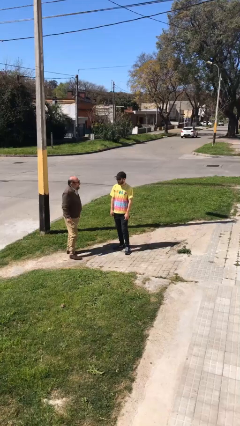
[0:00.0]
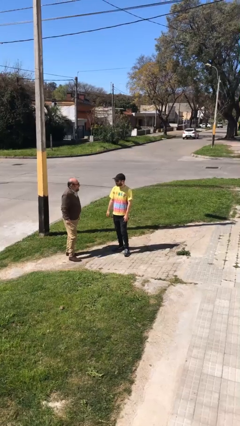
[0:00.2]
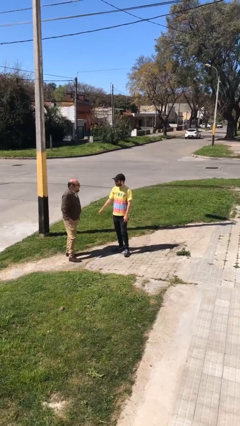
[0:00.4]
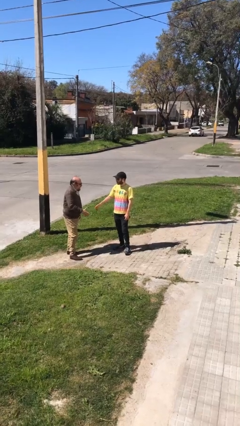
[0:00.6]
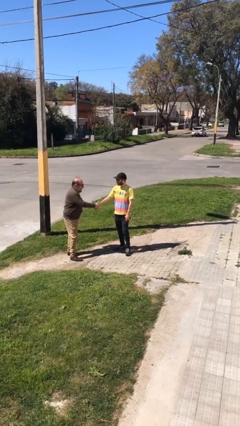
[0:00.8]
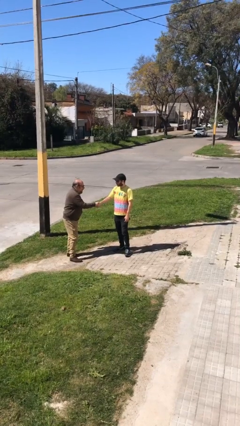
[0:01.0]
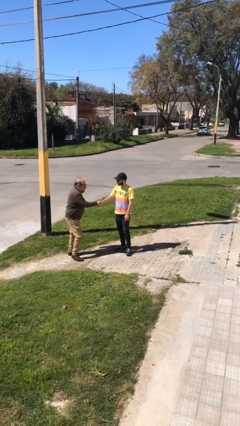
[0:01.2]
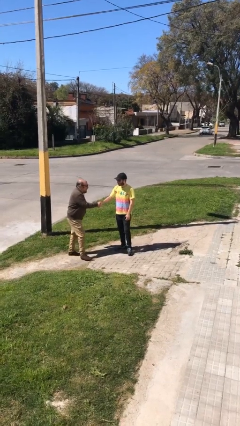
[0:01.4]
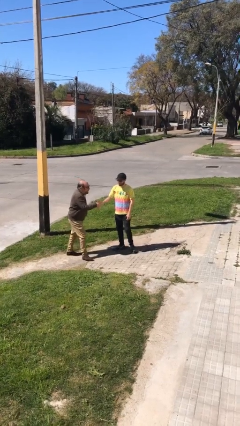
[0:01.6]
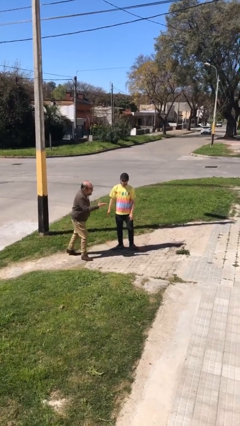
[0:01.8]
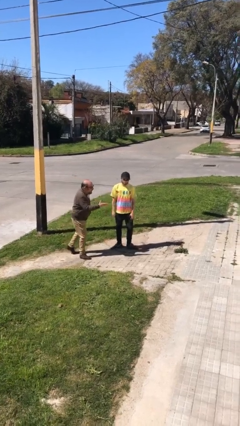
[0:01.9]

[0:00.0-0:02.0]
person shakes hand

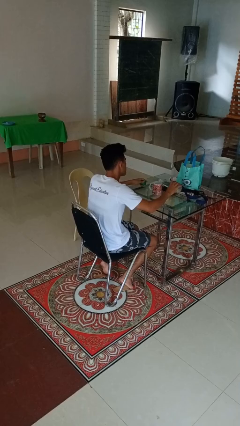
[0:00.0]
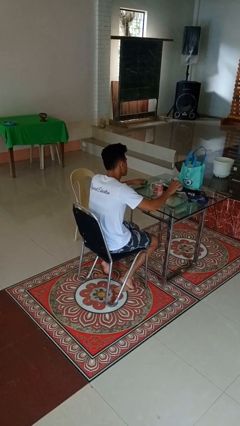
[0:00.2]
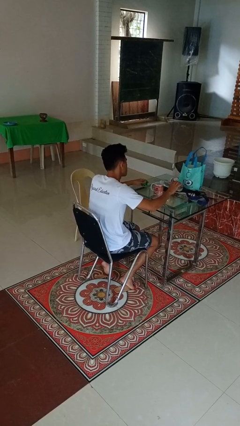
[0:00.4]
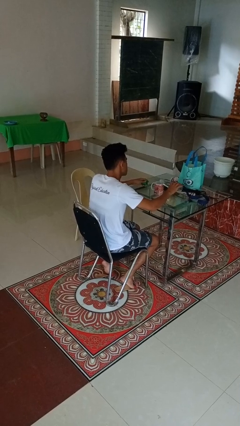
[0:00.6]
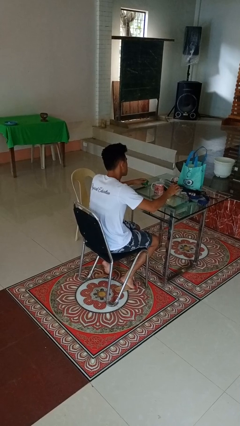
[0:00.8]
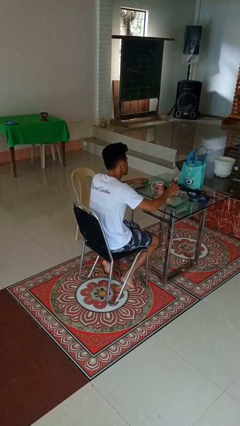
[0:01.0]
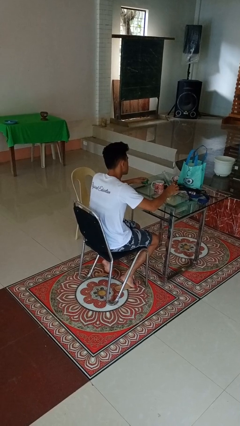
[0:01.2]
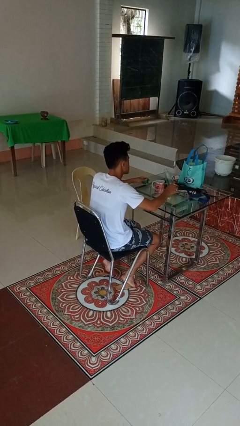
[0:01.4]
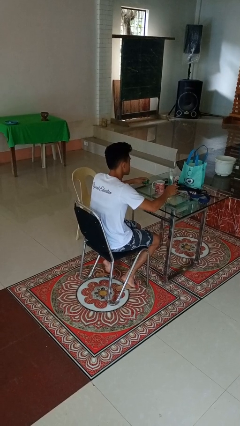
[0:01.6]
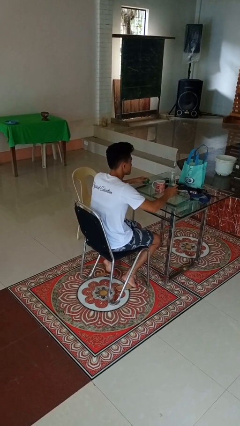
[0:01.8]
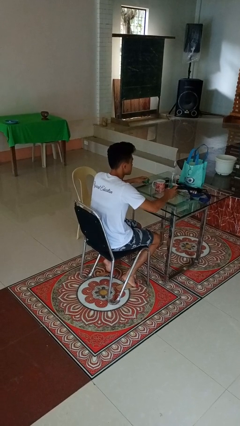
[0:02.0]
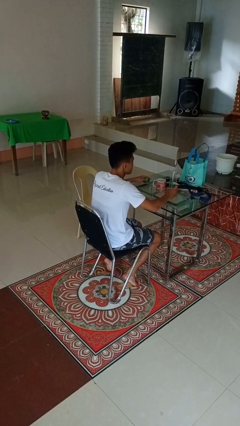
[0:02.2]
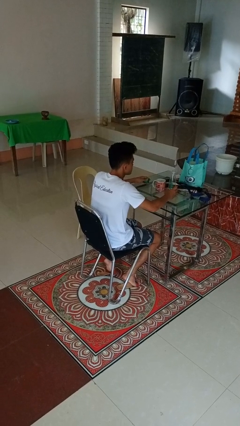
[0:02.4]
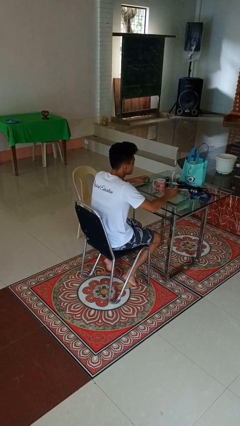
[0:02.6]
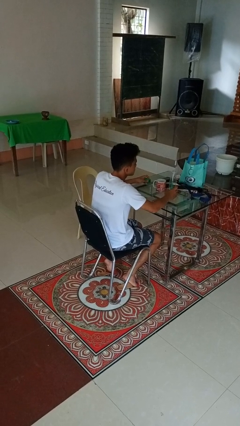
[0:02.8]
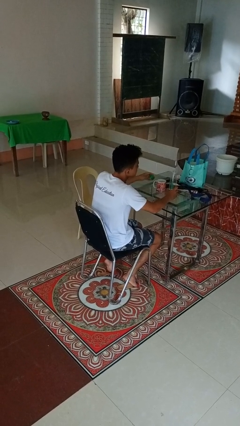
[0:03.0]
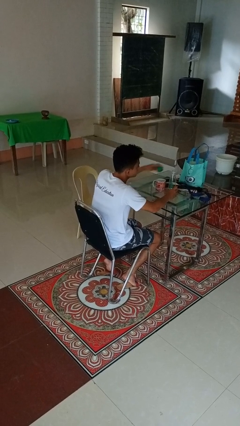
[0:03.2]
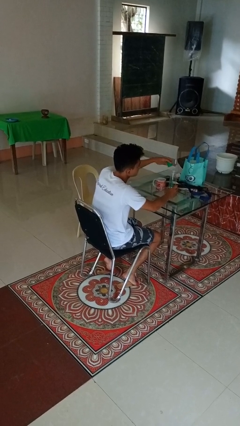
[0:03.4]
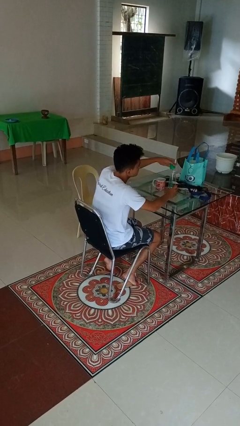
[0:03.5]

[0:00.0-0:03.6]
person pours liquid into cup

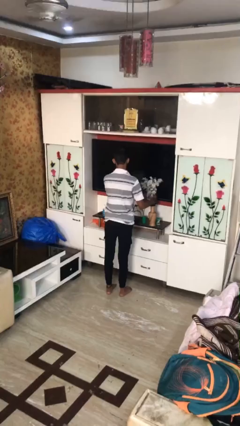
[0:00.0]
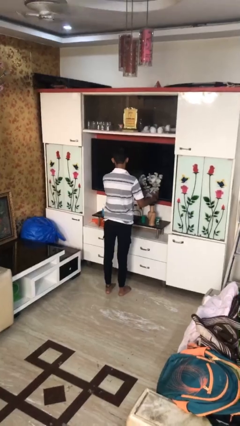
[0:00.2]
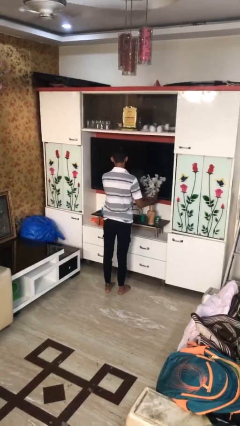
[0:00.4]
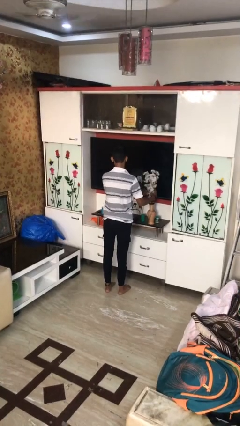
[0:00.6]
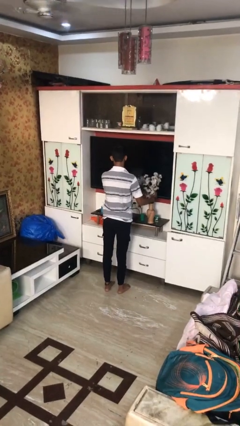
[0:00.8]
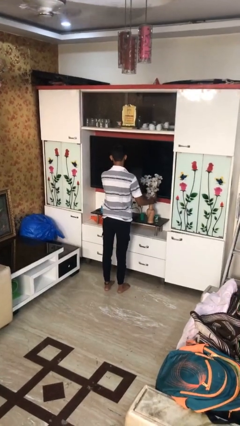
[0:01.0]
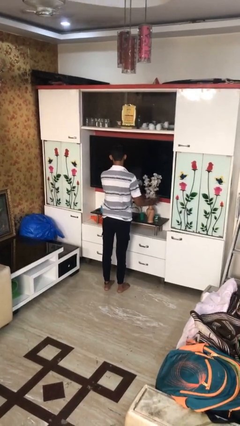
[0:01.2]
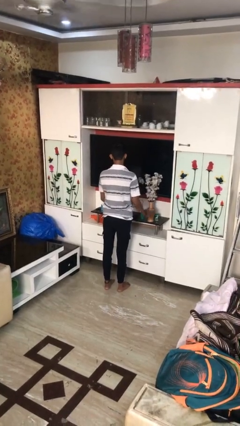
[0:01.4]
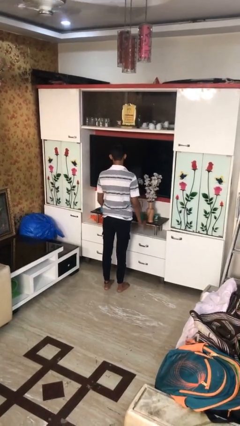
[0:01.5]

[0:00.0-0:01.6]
person arranges flowers in vase

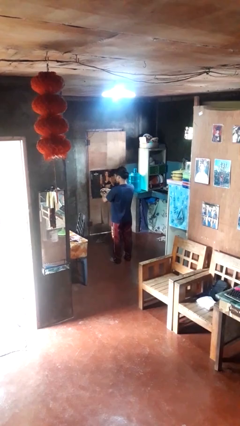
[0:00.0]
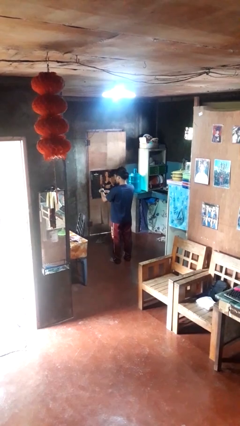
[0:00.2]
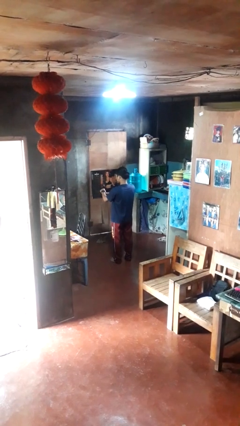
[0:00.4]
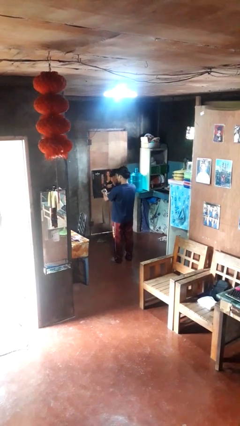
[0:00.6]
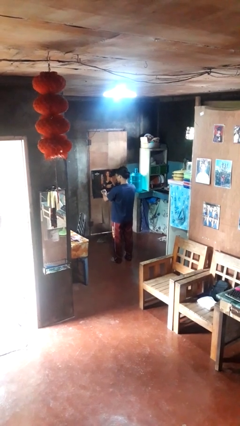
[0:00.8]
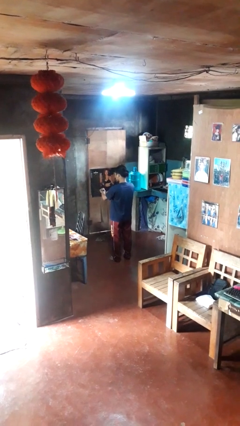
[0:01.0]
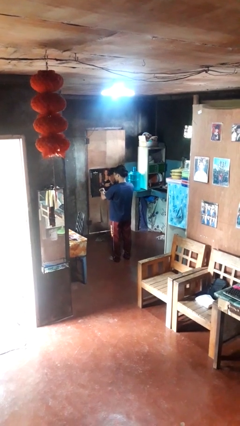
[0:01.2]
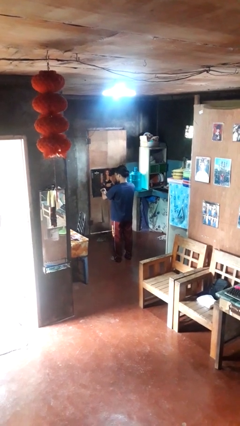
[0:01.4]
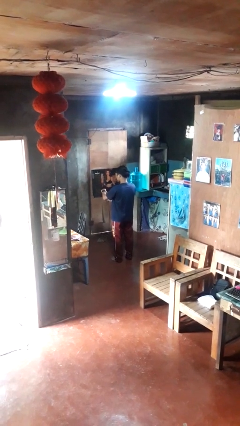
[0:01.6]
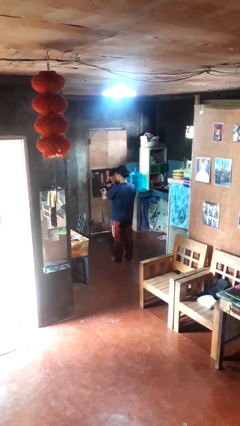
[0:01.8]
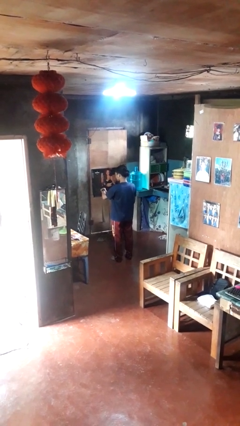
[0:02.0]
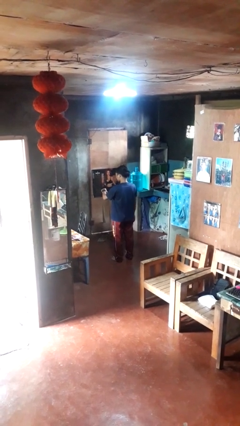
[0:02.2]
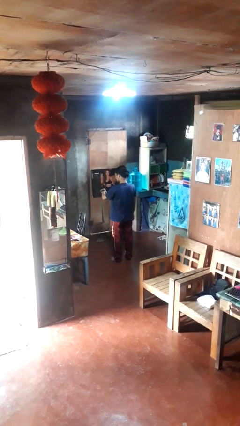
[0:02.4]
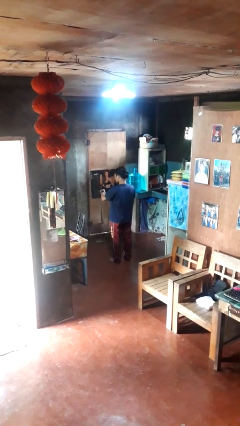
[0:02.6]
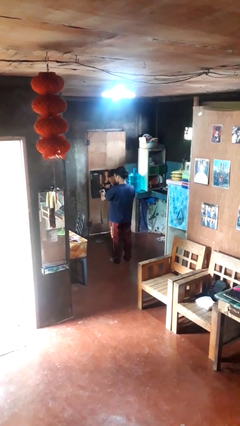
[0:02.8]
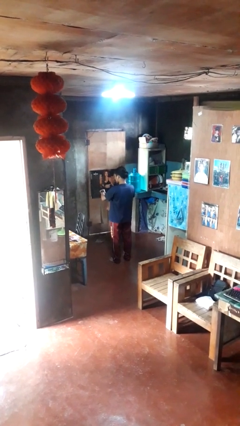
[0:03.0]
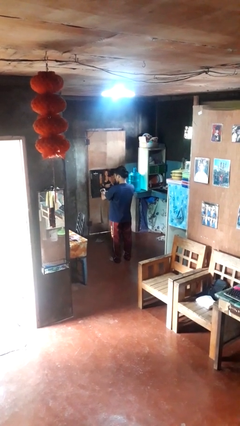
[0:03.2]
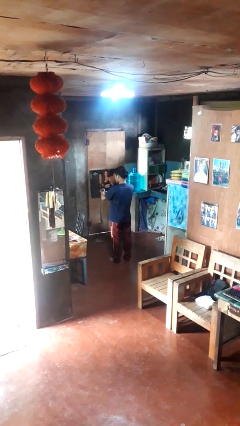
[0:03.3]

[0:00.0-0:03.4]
person puts on wristwatch

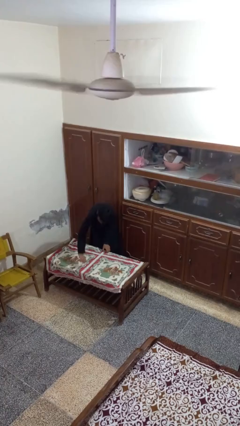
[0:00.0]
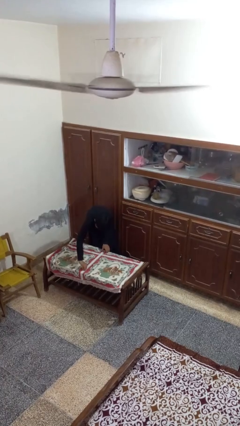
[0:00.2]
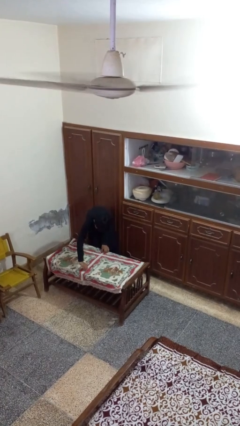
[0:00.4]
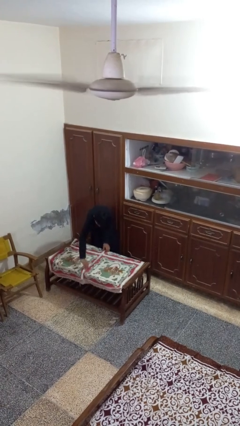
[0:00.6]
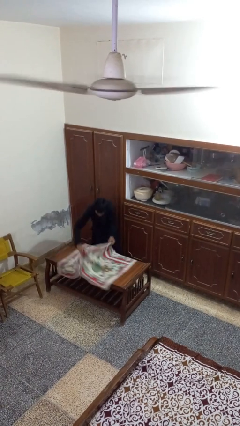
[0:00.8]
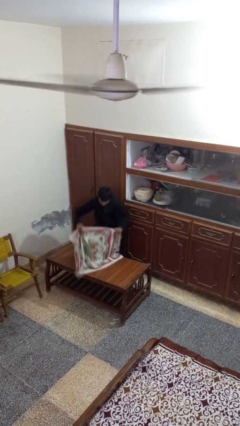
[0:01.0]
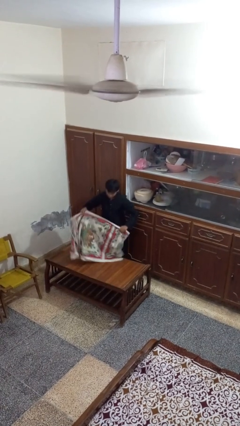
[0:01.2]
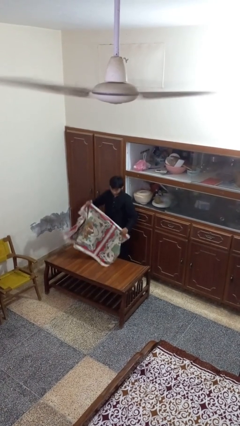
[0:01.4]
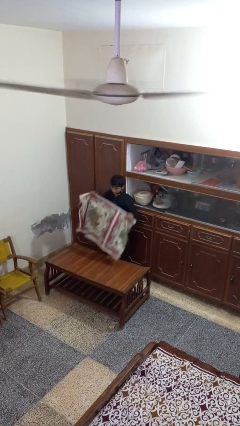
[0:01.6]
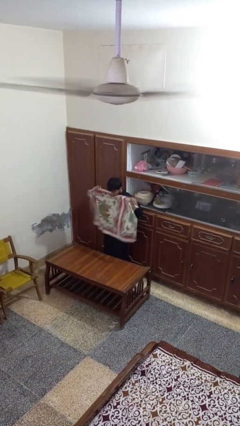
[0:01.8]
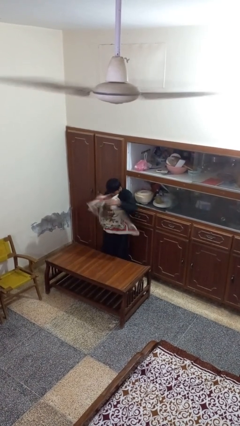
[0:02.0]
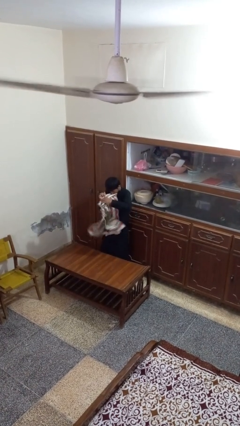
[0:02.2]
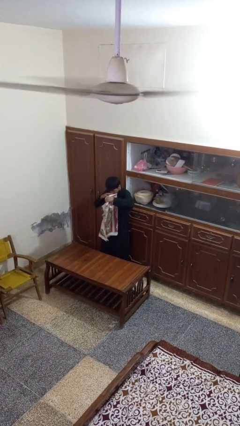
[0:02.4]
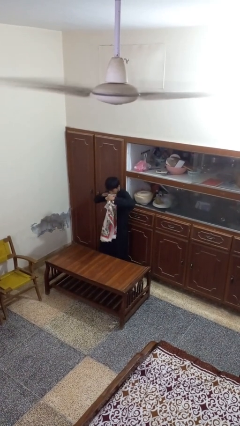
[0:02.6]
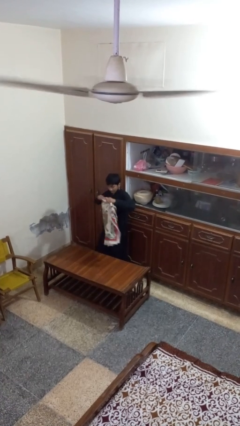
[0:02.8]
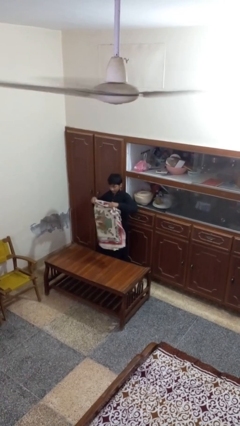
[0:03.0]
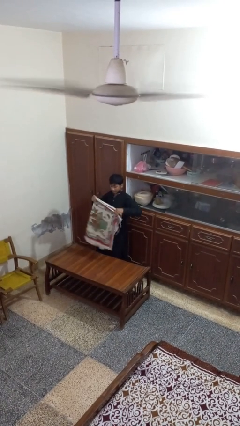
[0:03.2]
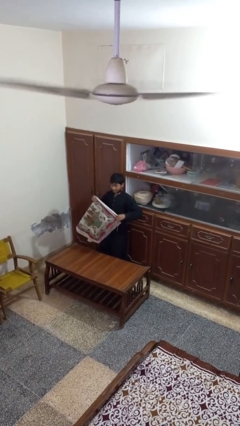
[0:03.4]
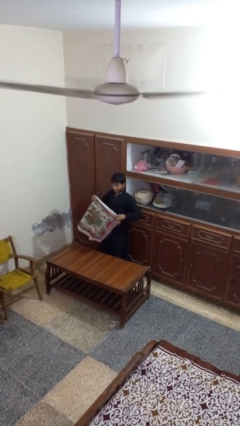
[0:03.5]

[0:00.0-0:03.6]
person folds tablecloth

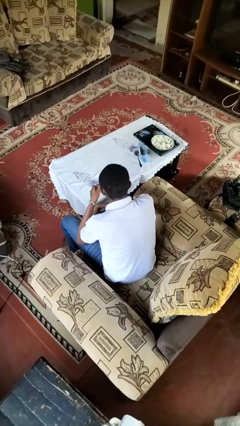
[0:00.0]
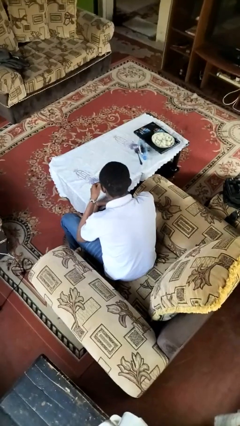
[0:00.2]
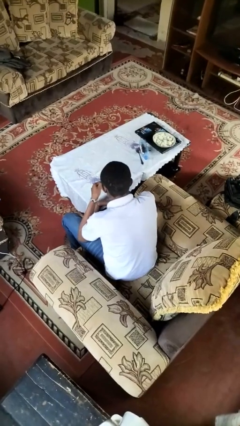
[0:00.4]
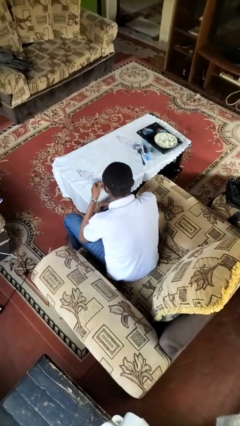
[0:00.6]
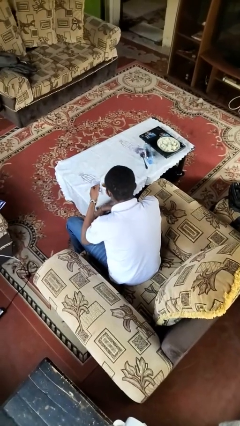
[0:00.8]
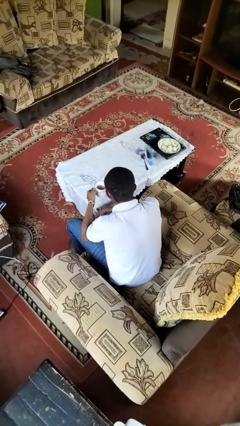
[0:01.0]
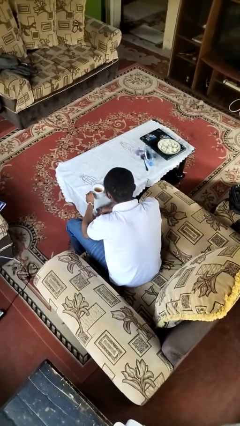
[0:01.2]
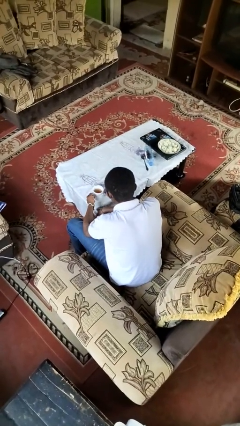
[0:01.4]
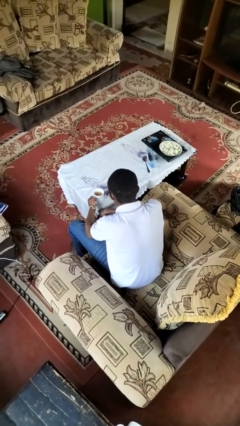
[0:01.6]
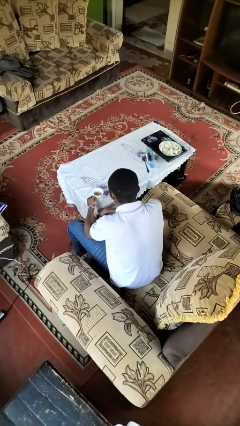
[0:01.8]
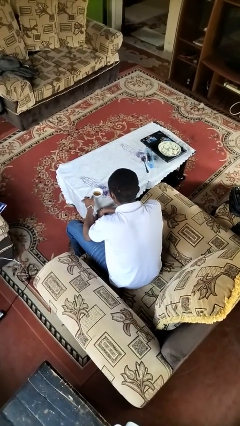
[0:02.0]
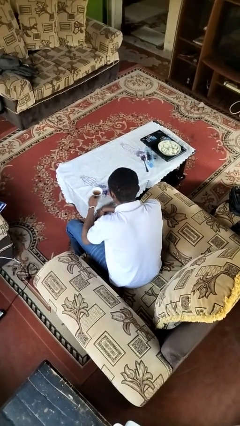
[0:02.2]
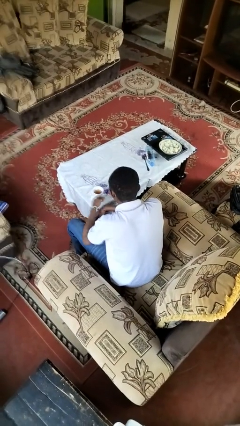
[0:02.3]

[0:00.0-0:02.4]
person puts down object on table

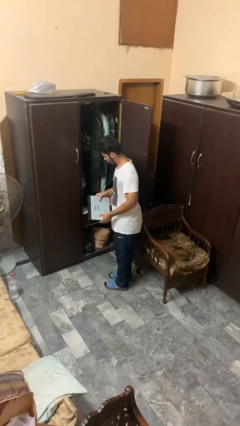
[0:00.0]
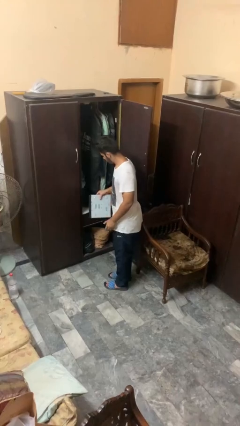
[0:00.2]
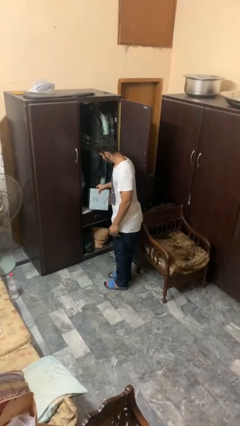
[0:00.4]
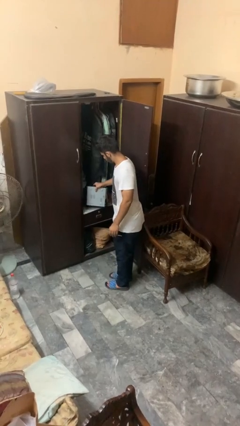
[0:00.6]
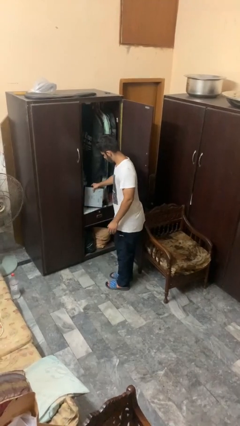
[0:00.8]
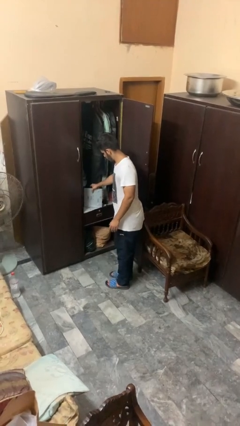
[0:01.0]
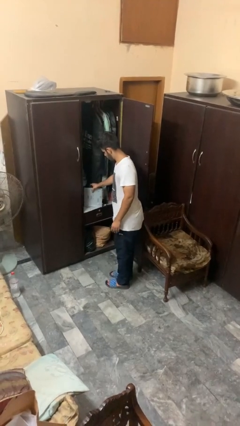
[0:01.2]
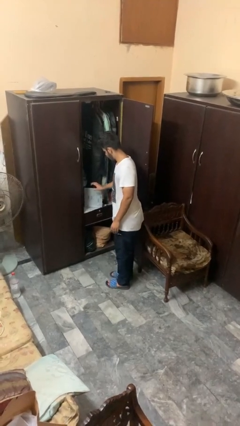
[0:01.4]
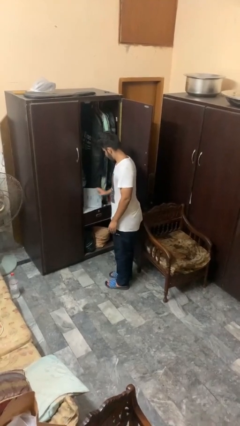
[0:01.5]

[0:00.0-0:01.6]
person puts down object into cabinet
